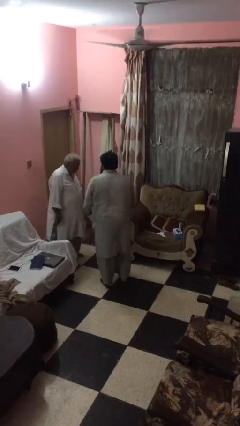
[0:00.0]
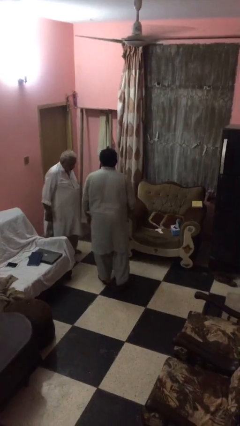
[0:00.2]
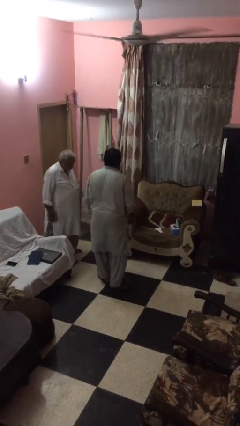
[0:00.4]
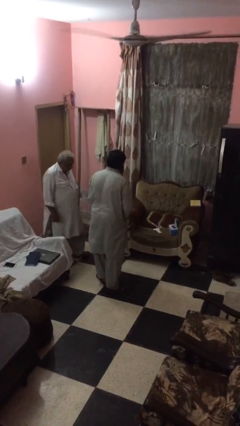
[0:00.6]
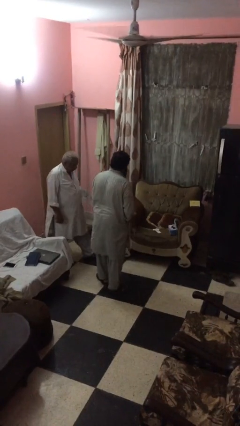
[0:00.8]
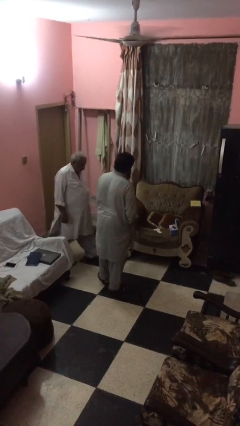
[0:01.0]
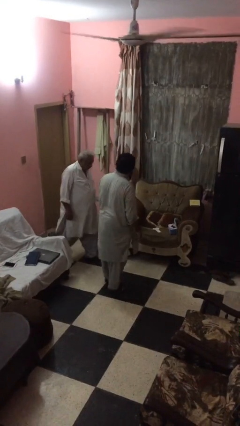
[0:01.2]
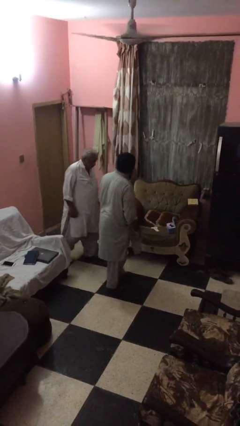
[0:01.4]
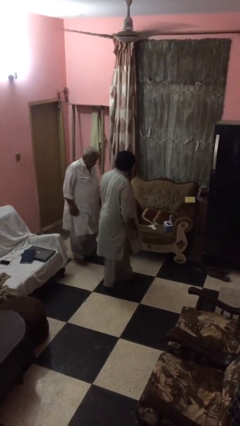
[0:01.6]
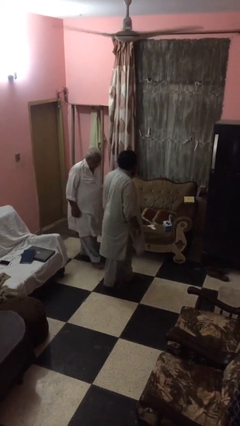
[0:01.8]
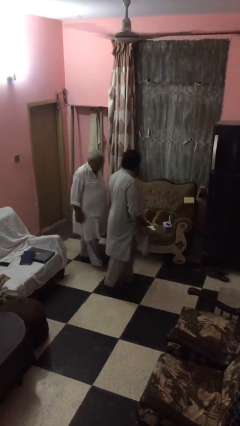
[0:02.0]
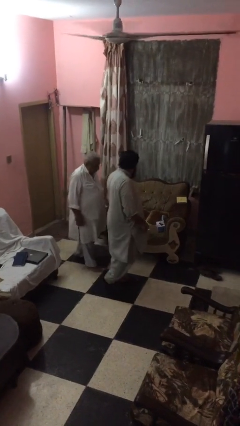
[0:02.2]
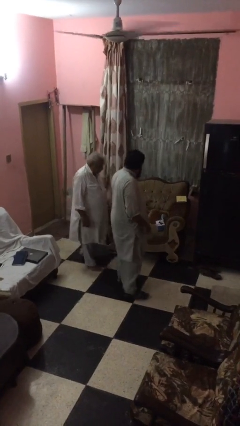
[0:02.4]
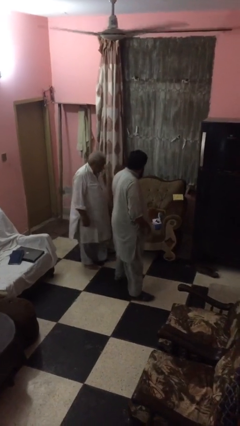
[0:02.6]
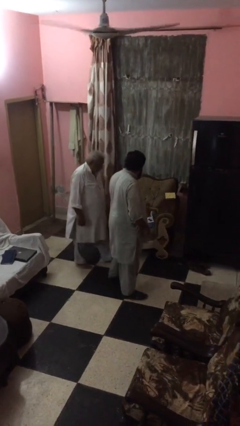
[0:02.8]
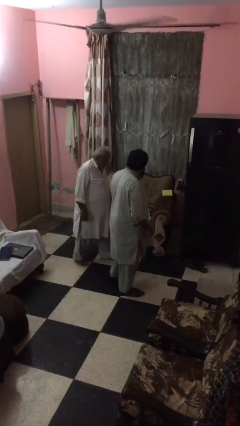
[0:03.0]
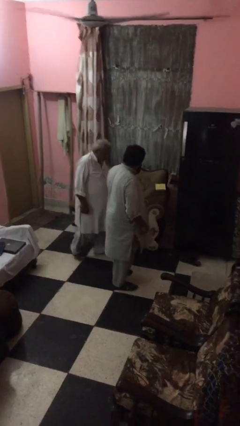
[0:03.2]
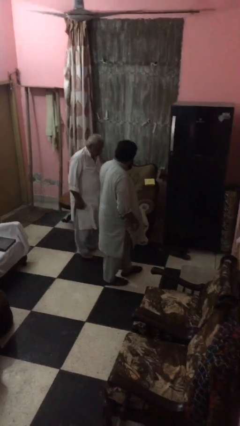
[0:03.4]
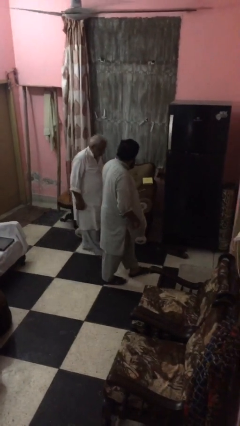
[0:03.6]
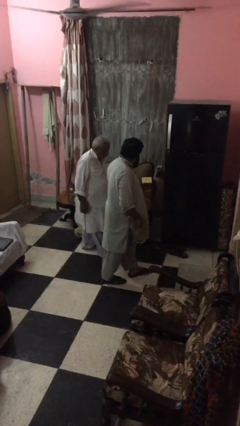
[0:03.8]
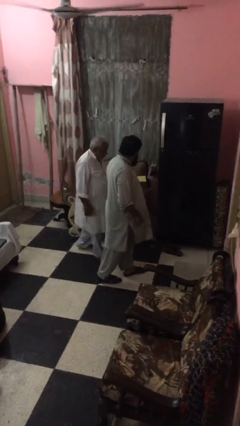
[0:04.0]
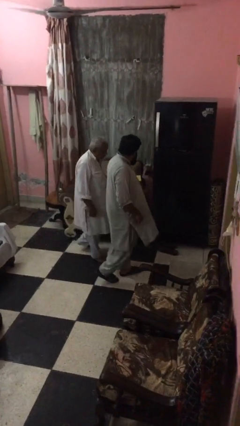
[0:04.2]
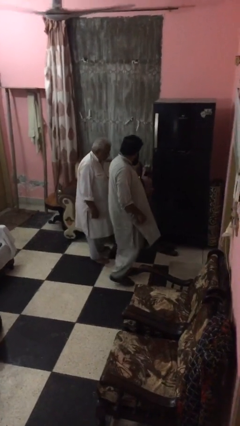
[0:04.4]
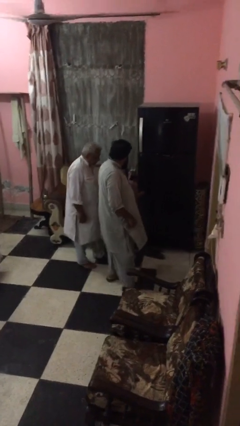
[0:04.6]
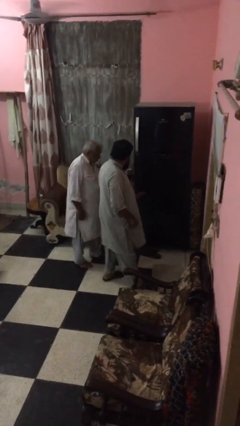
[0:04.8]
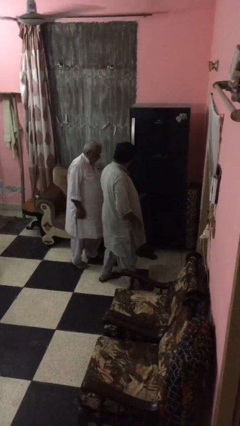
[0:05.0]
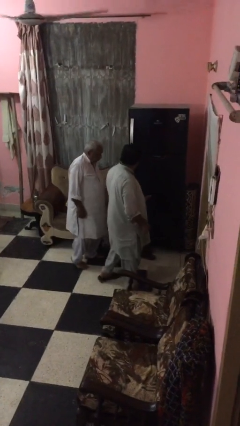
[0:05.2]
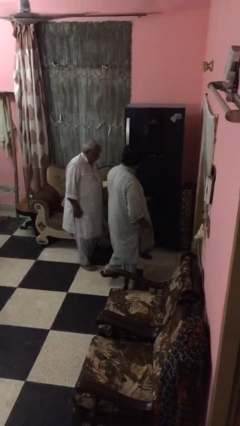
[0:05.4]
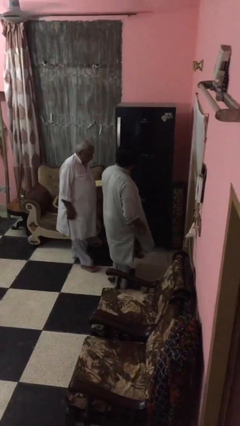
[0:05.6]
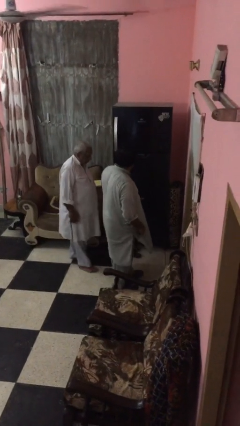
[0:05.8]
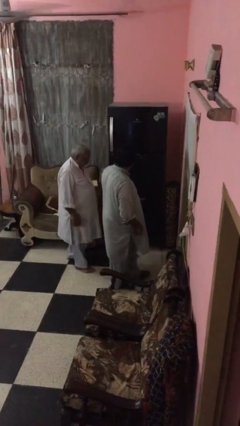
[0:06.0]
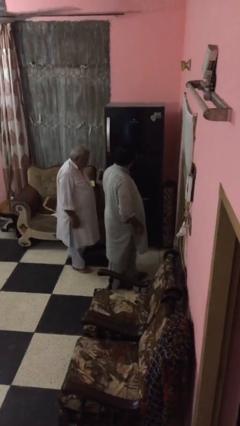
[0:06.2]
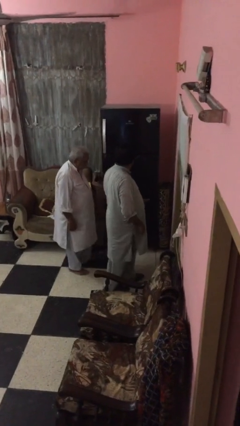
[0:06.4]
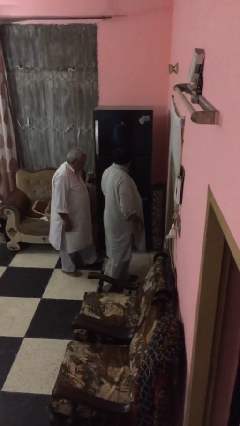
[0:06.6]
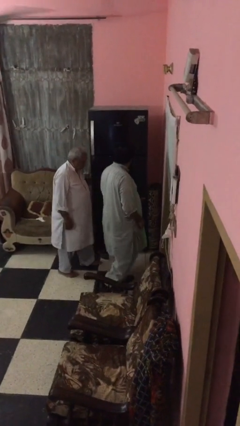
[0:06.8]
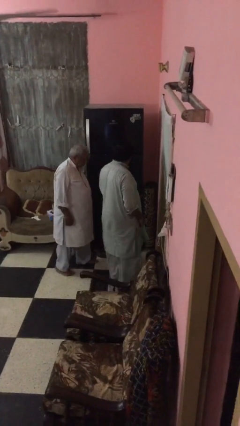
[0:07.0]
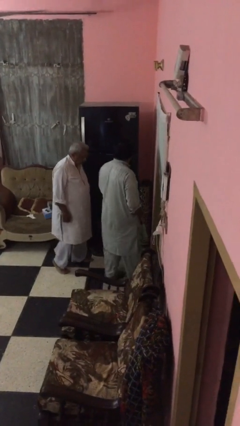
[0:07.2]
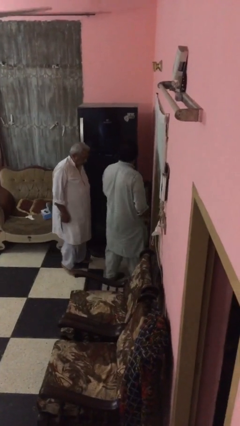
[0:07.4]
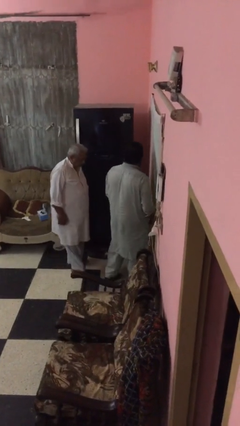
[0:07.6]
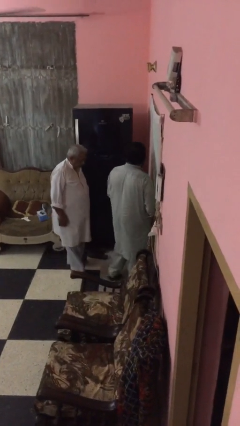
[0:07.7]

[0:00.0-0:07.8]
person talks to person

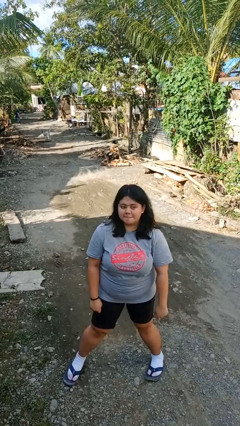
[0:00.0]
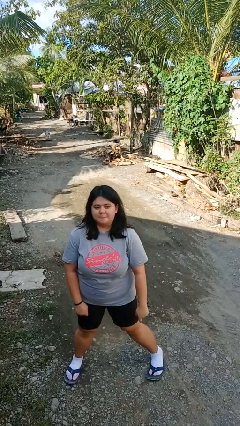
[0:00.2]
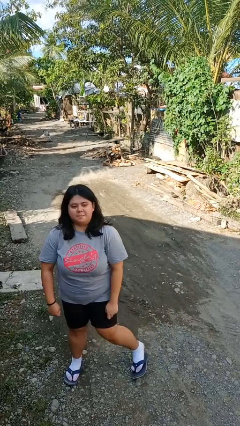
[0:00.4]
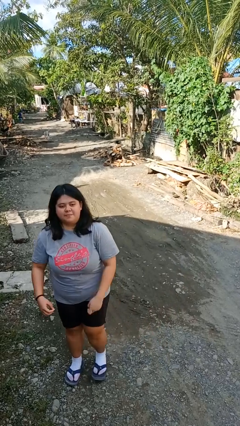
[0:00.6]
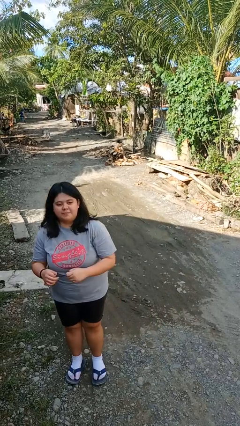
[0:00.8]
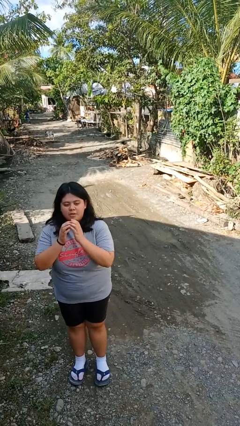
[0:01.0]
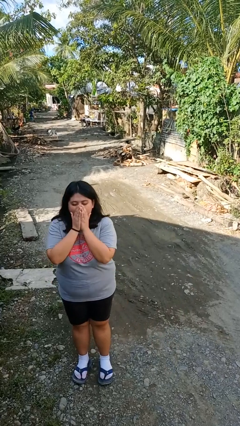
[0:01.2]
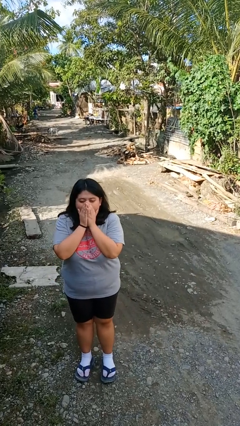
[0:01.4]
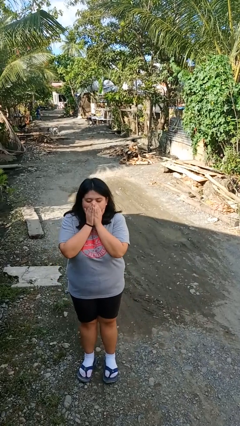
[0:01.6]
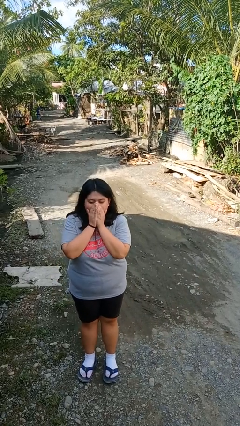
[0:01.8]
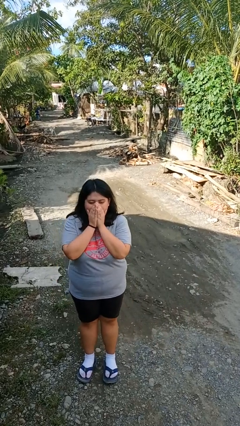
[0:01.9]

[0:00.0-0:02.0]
person blows into hands

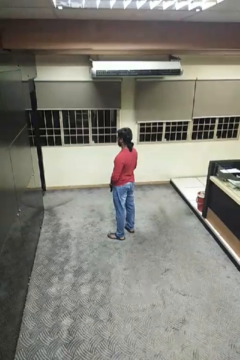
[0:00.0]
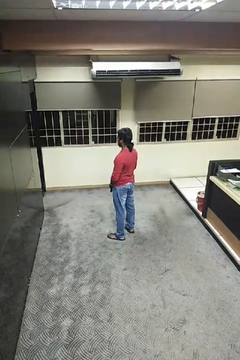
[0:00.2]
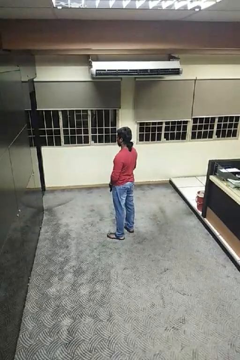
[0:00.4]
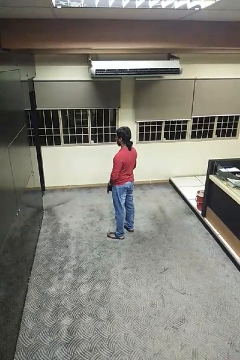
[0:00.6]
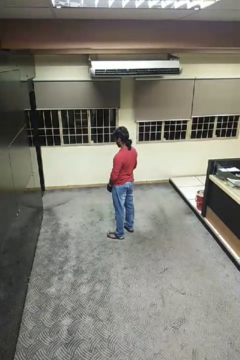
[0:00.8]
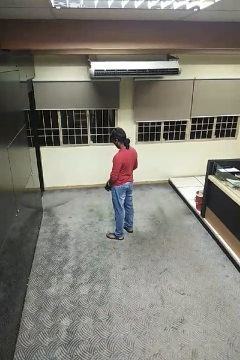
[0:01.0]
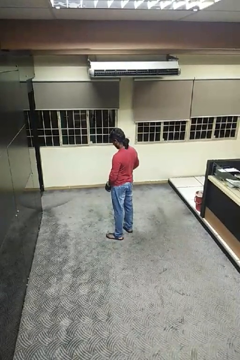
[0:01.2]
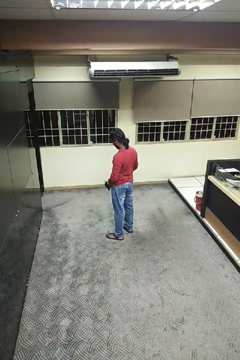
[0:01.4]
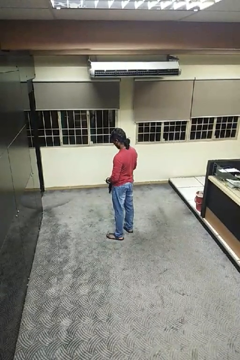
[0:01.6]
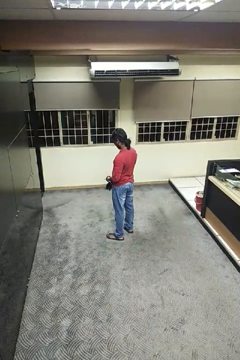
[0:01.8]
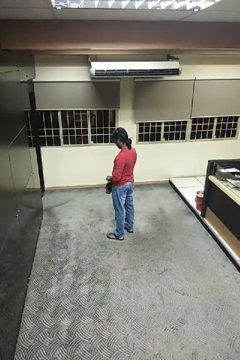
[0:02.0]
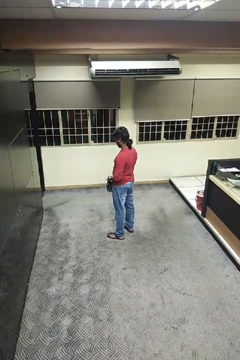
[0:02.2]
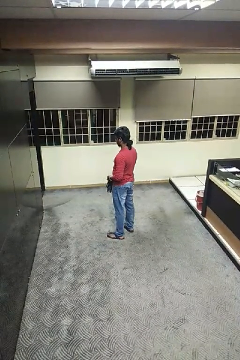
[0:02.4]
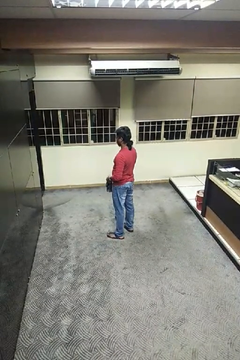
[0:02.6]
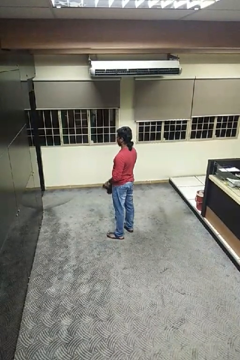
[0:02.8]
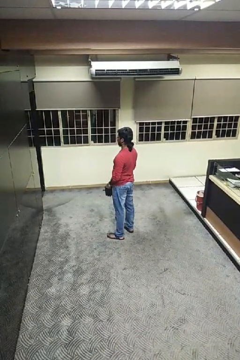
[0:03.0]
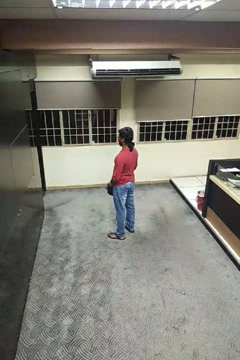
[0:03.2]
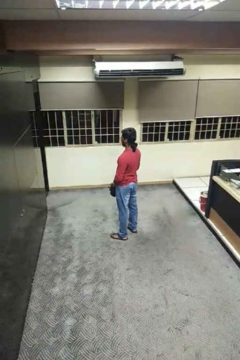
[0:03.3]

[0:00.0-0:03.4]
person takes off gloves

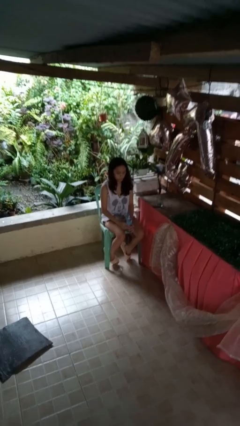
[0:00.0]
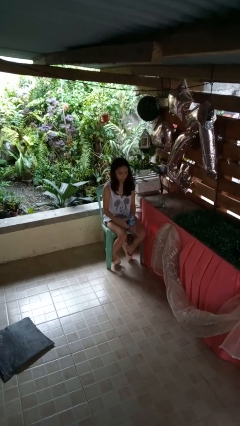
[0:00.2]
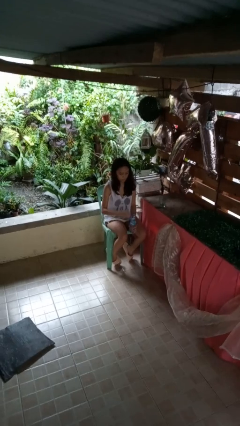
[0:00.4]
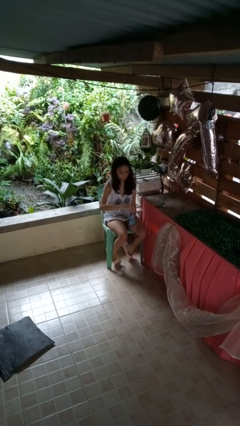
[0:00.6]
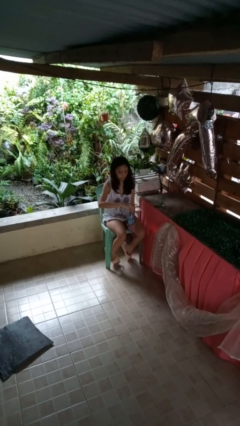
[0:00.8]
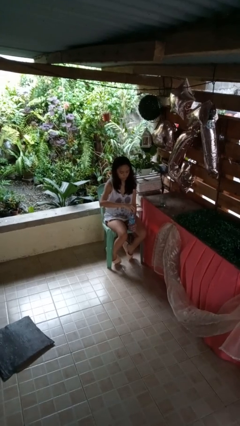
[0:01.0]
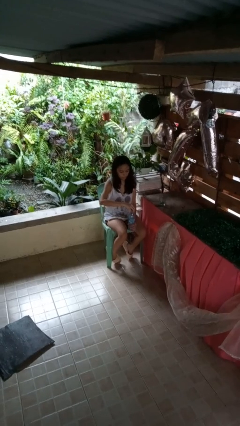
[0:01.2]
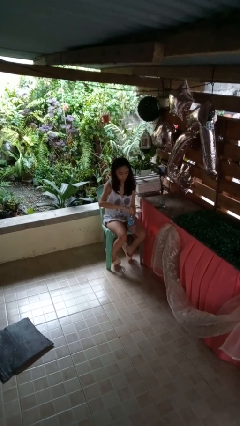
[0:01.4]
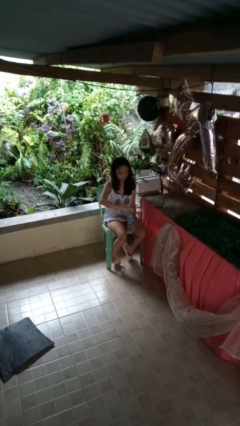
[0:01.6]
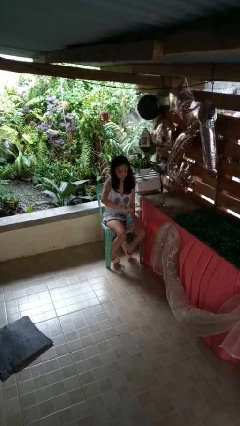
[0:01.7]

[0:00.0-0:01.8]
person screws lid to bottle

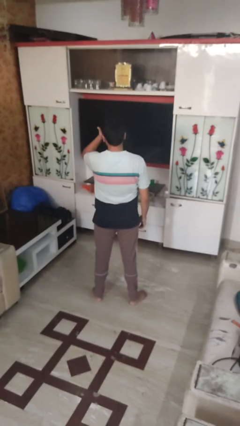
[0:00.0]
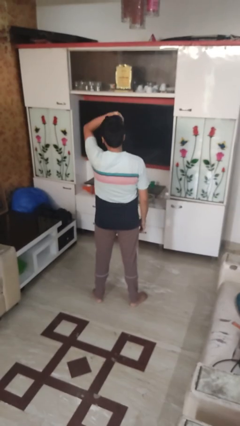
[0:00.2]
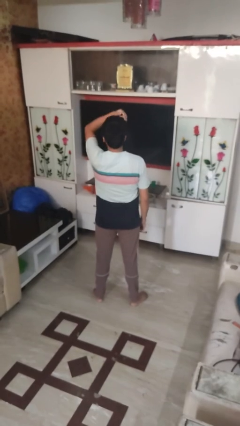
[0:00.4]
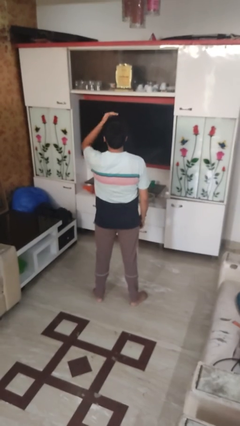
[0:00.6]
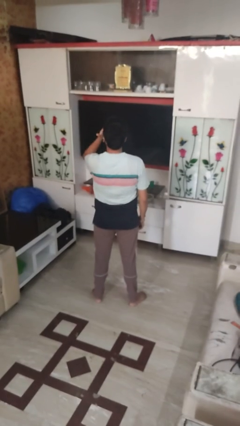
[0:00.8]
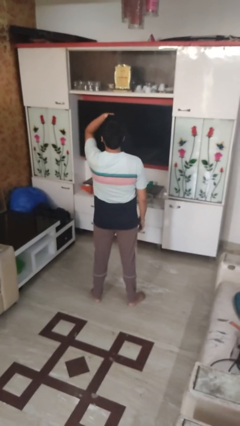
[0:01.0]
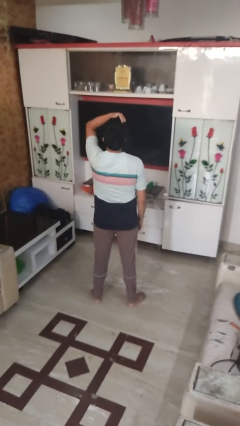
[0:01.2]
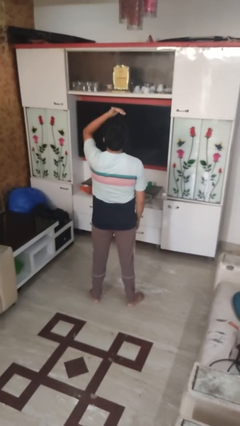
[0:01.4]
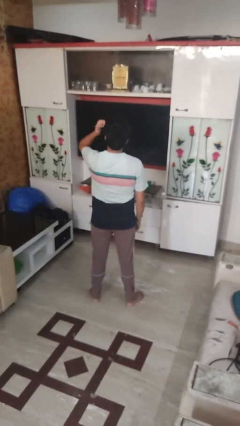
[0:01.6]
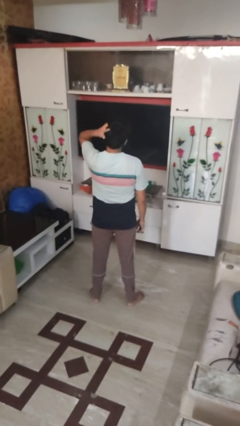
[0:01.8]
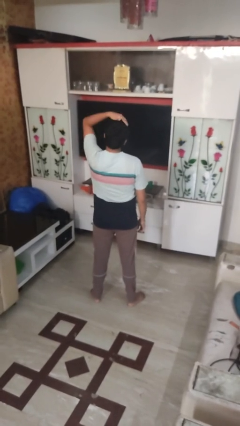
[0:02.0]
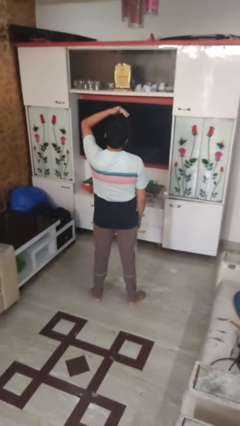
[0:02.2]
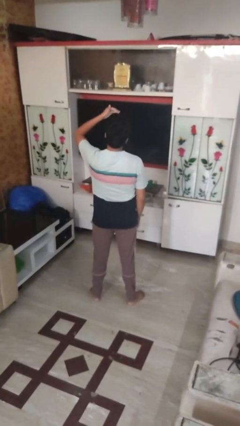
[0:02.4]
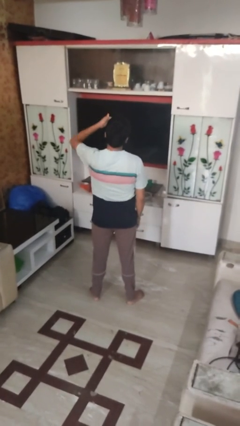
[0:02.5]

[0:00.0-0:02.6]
person strokes hair

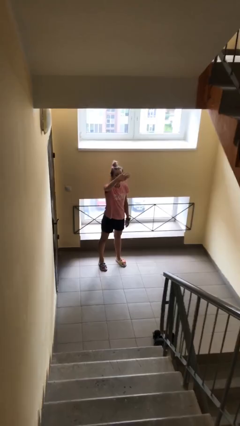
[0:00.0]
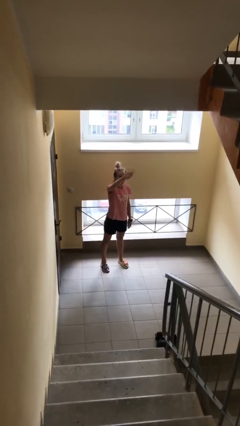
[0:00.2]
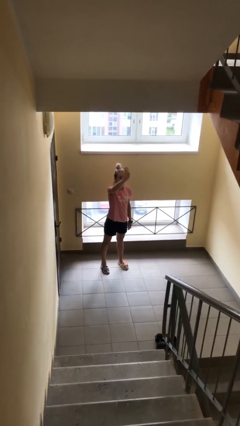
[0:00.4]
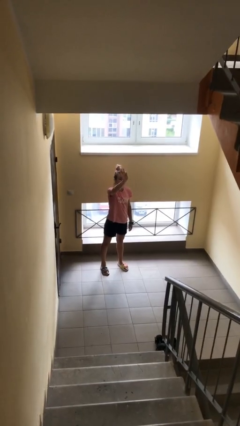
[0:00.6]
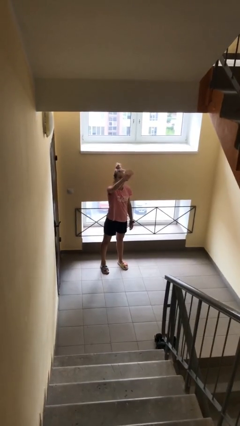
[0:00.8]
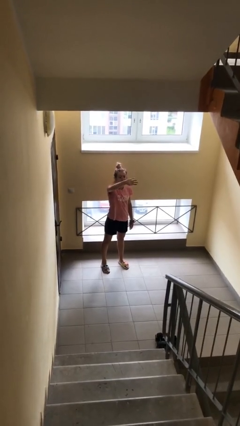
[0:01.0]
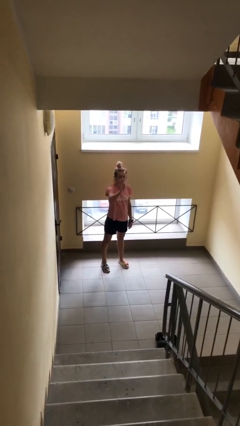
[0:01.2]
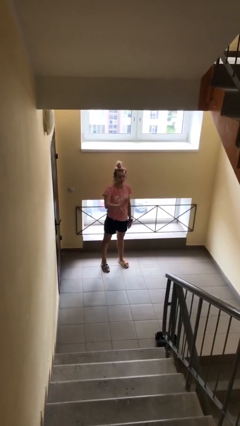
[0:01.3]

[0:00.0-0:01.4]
person waves at person
